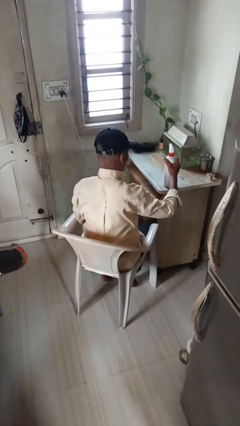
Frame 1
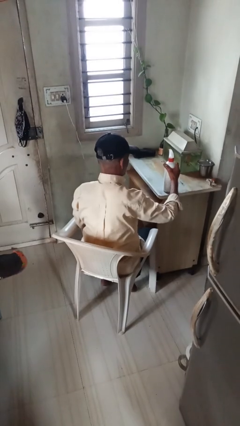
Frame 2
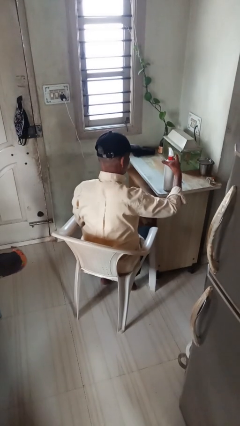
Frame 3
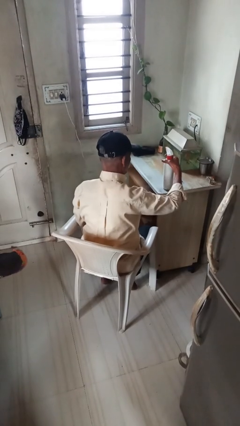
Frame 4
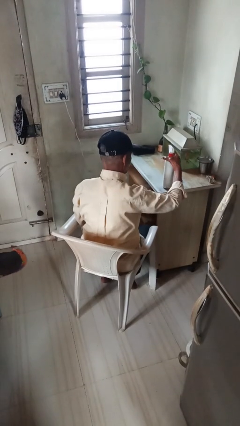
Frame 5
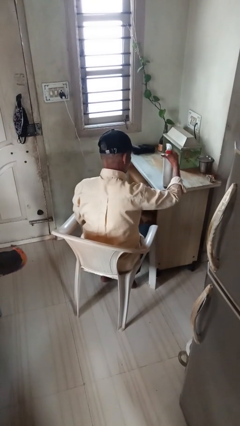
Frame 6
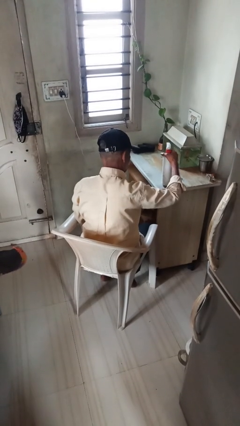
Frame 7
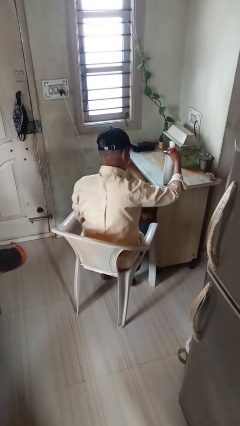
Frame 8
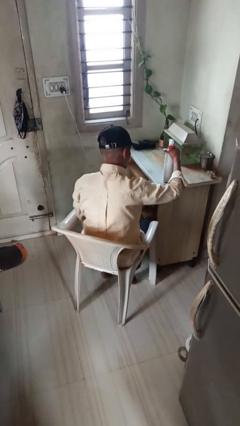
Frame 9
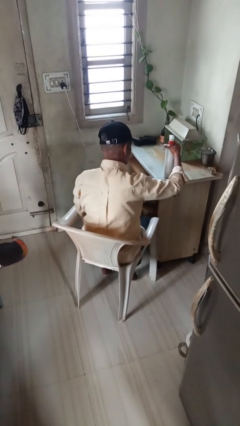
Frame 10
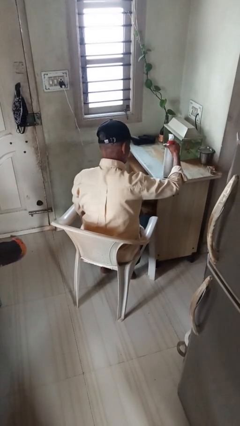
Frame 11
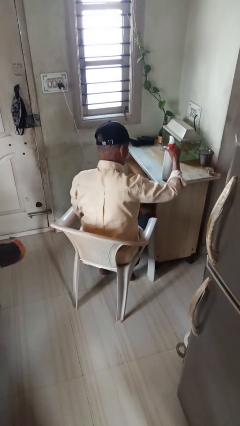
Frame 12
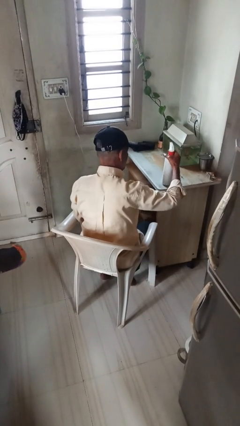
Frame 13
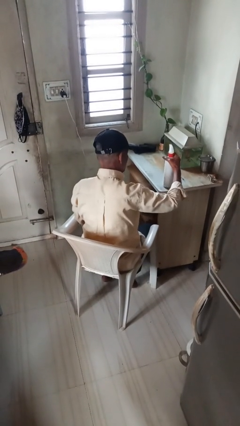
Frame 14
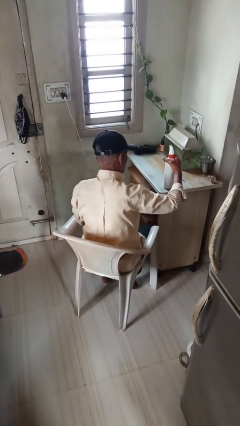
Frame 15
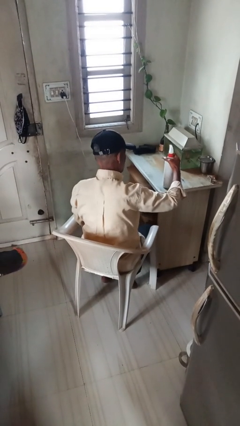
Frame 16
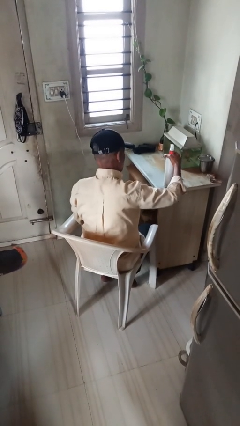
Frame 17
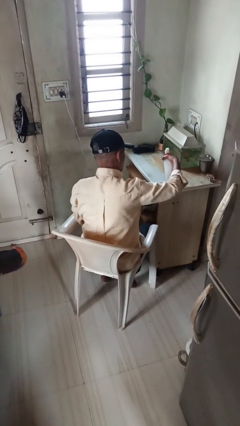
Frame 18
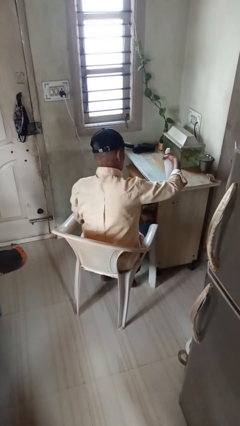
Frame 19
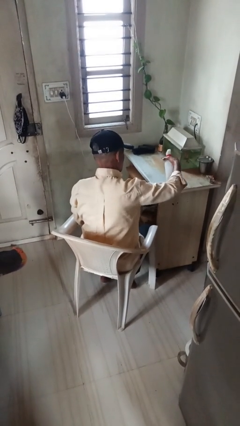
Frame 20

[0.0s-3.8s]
person sprays from bottle

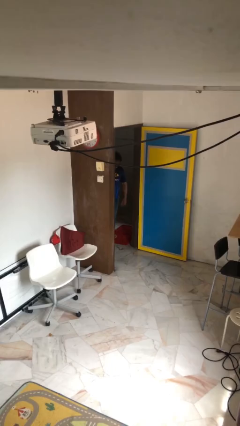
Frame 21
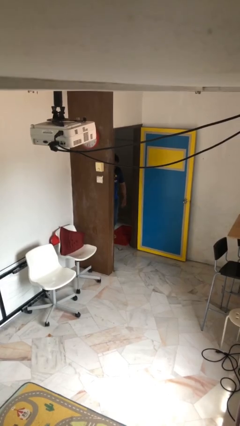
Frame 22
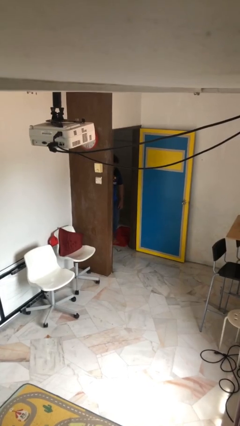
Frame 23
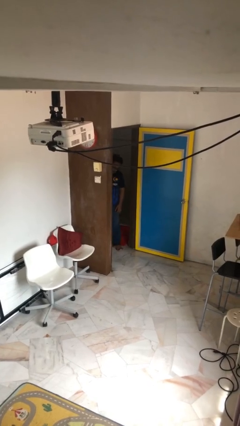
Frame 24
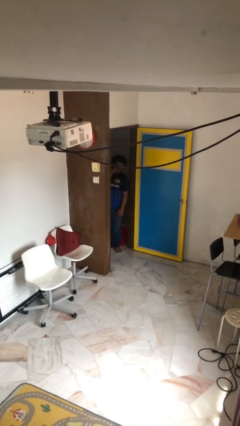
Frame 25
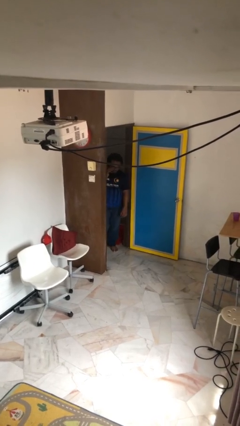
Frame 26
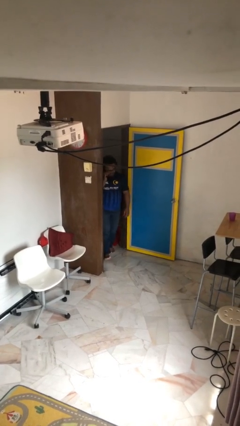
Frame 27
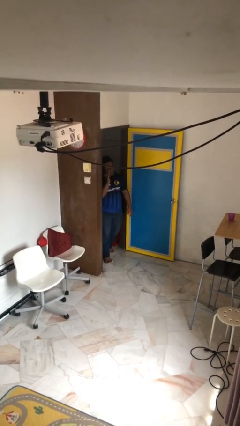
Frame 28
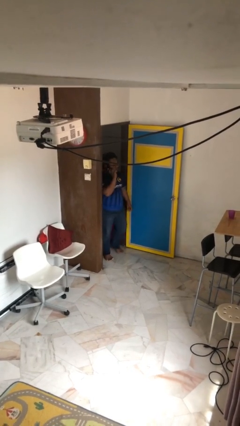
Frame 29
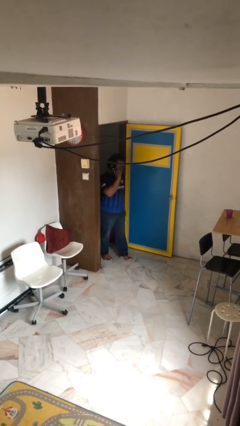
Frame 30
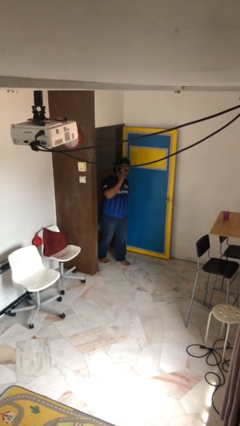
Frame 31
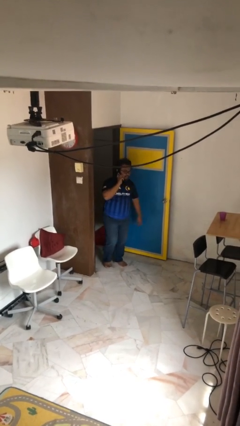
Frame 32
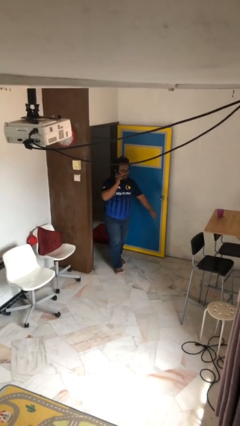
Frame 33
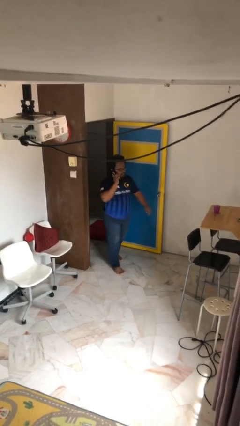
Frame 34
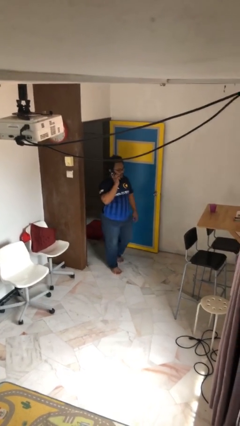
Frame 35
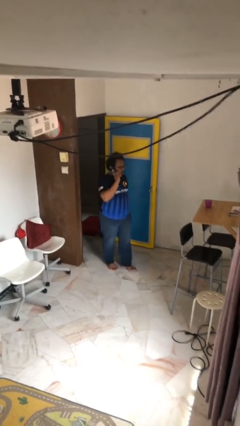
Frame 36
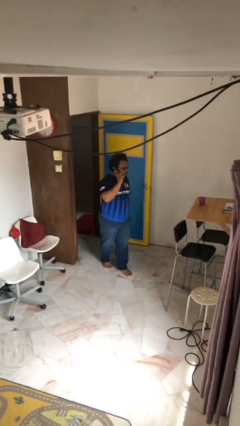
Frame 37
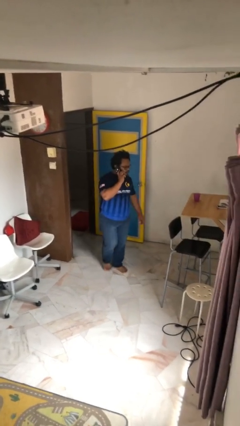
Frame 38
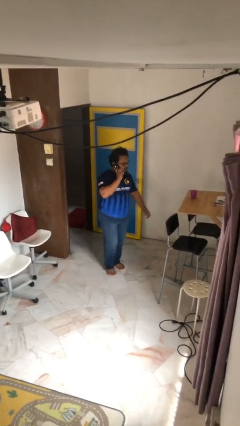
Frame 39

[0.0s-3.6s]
person enters scene through structure

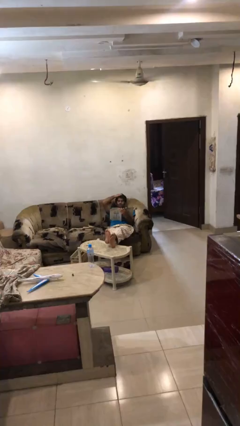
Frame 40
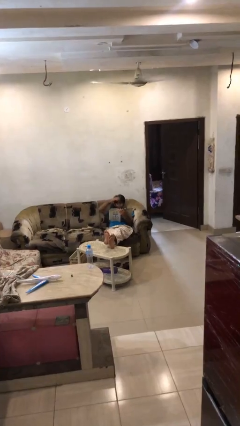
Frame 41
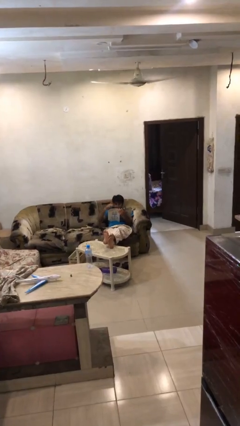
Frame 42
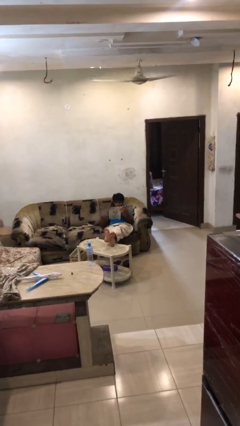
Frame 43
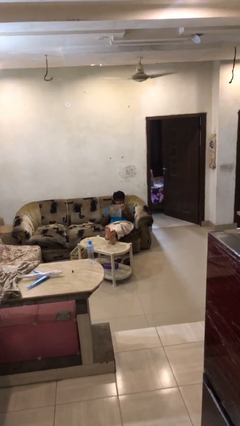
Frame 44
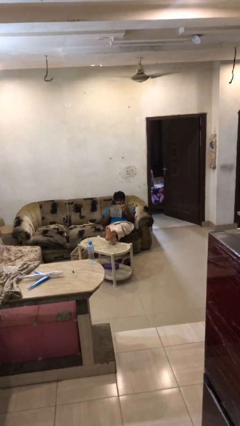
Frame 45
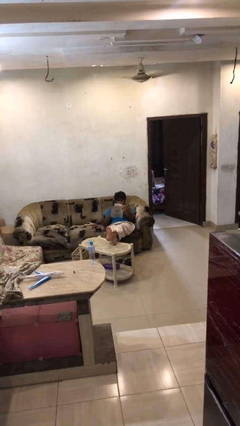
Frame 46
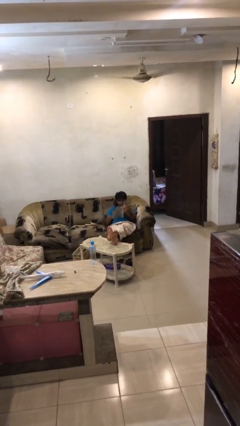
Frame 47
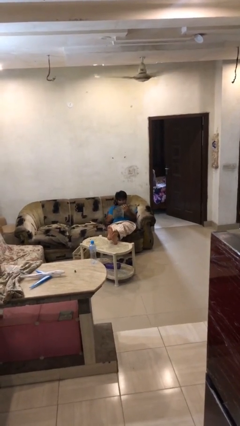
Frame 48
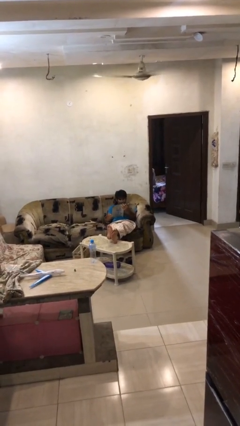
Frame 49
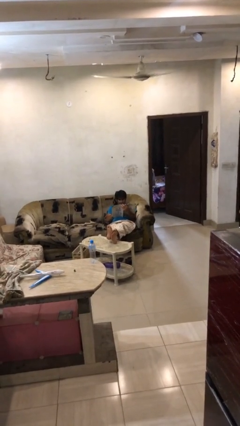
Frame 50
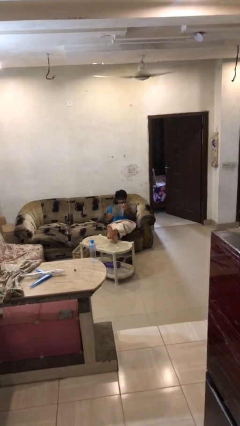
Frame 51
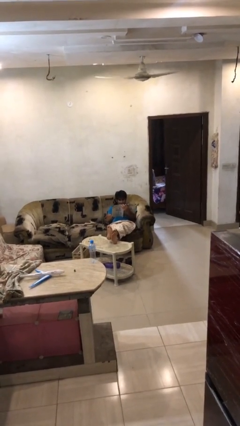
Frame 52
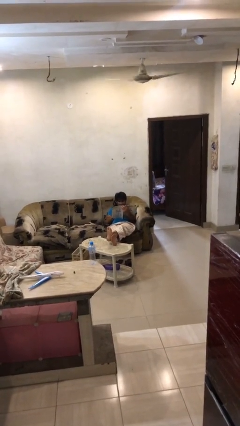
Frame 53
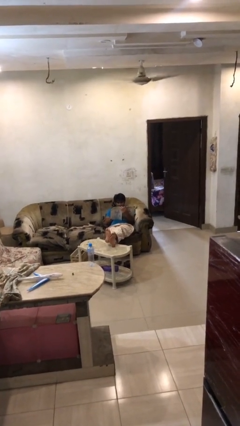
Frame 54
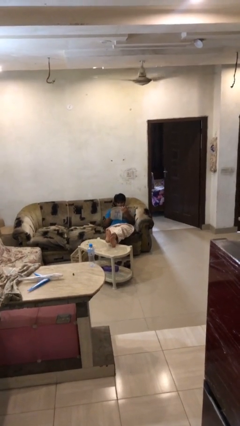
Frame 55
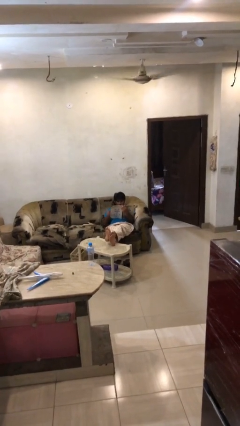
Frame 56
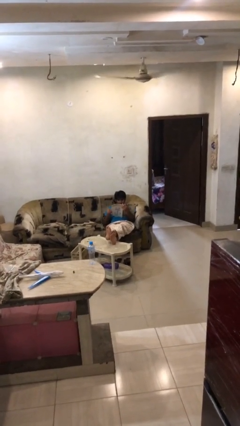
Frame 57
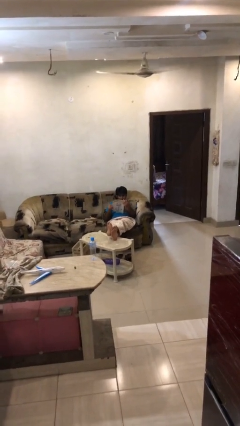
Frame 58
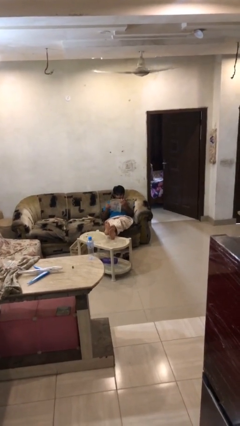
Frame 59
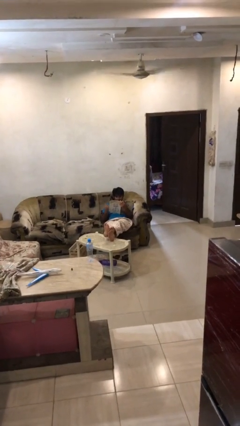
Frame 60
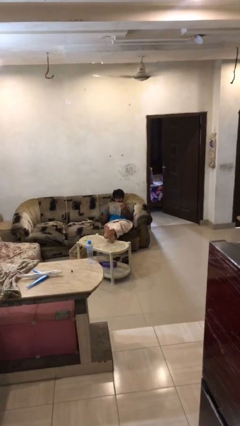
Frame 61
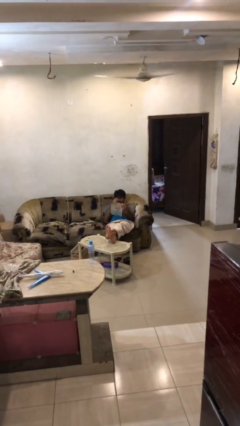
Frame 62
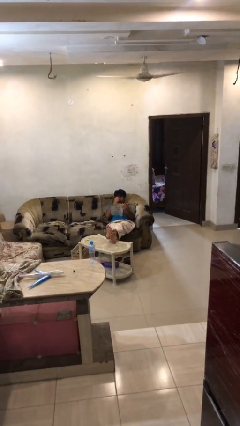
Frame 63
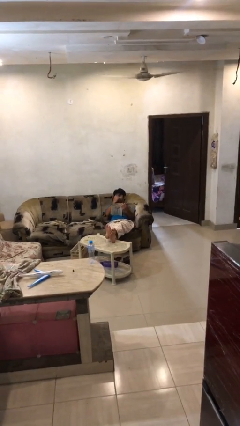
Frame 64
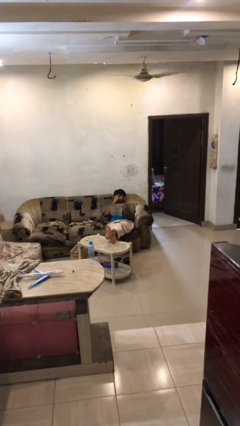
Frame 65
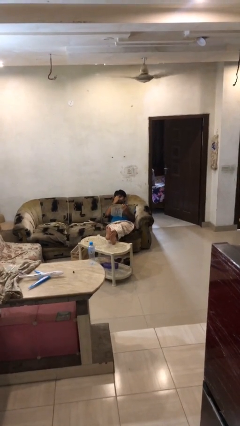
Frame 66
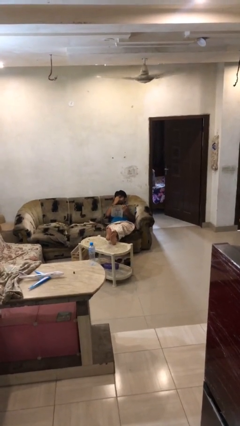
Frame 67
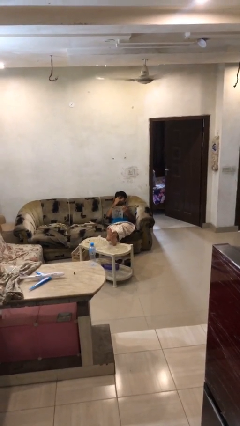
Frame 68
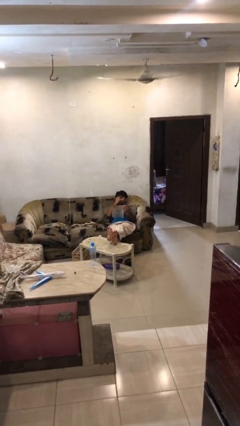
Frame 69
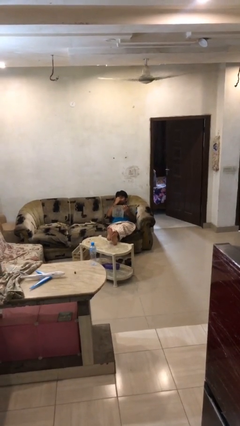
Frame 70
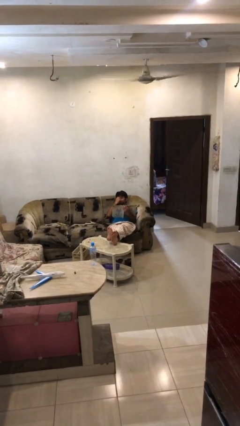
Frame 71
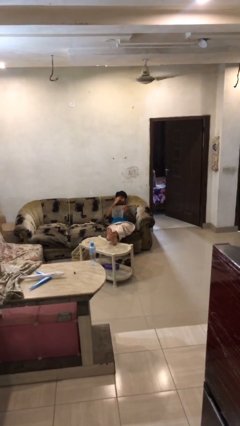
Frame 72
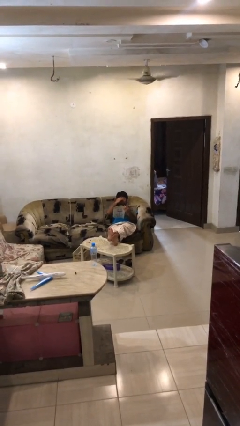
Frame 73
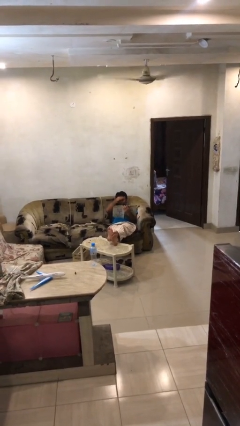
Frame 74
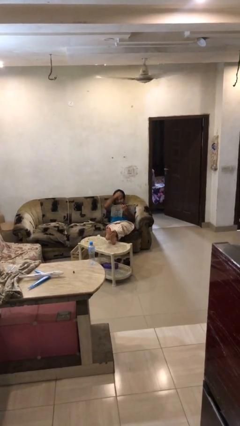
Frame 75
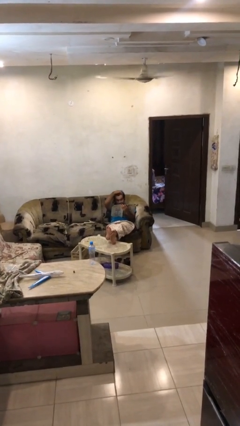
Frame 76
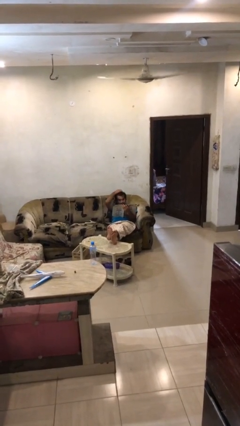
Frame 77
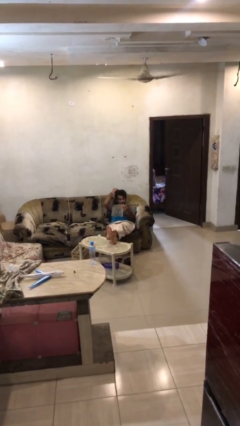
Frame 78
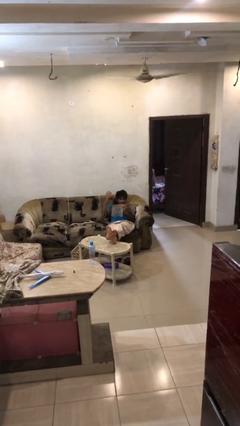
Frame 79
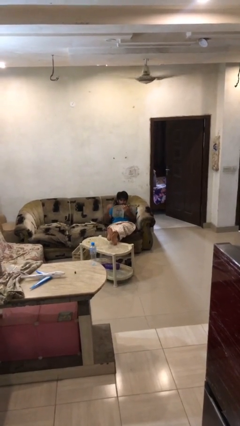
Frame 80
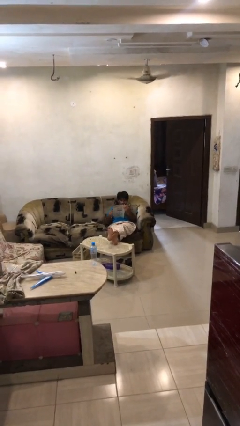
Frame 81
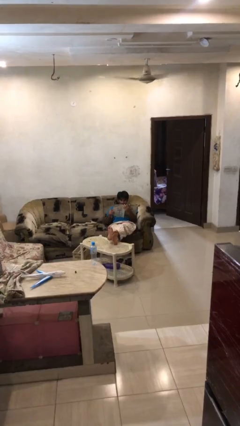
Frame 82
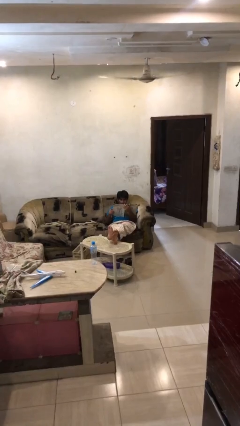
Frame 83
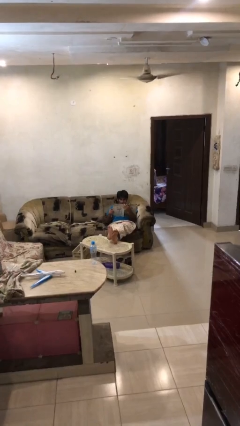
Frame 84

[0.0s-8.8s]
person reads document

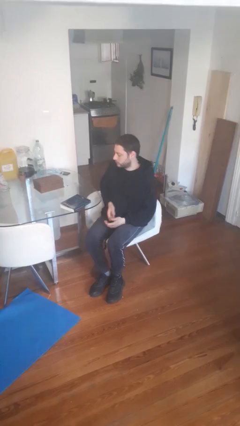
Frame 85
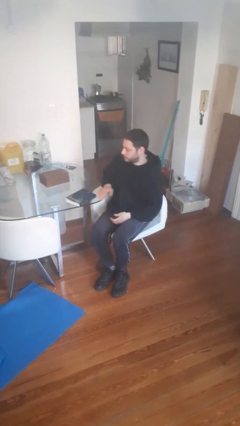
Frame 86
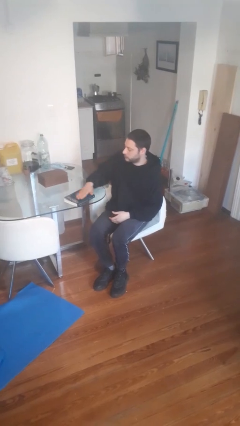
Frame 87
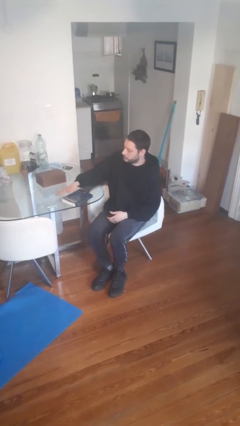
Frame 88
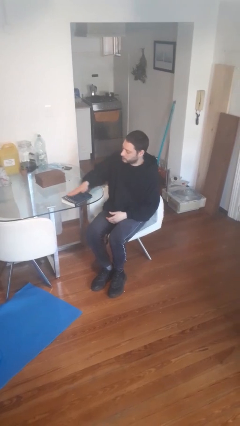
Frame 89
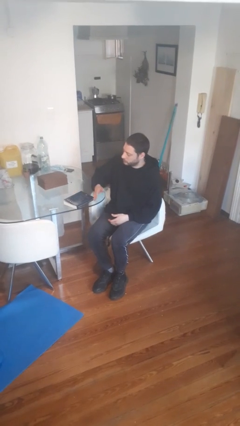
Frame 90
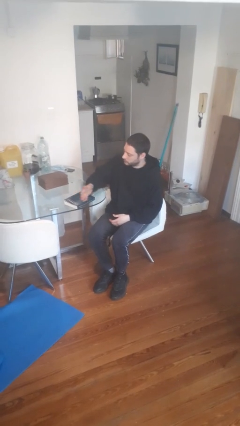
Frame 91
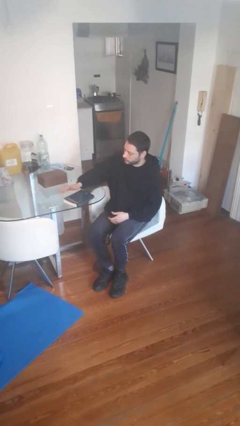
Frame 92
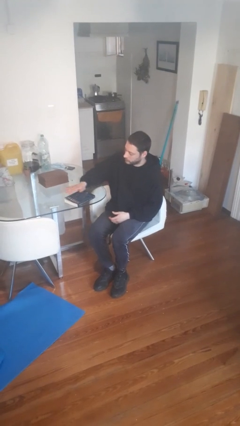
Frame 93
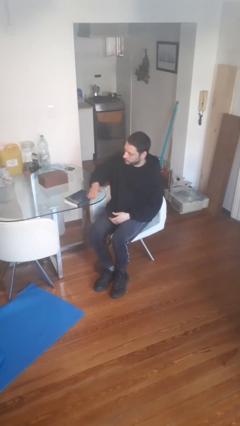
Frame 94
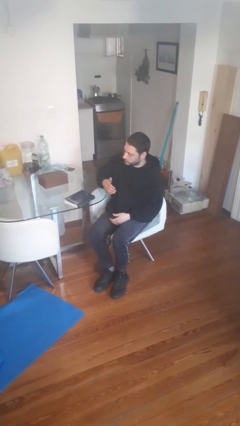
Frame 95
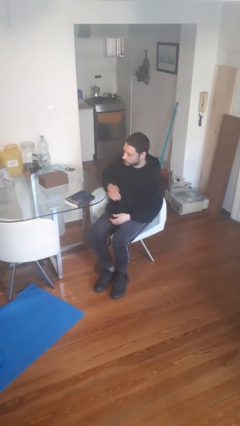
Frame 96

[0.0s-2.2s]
person waves hand over object
